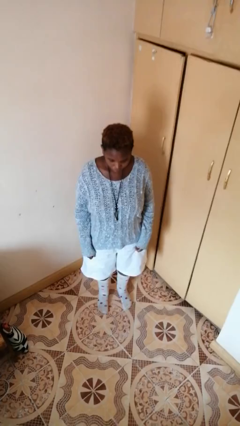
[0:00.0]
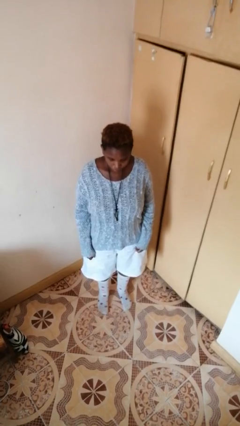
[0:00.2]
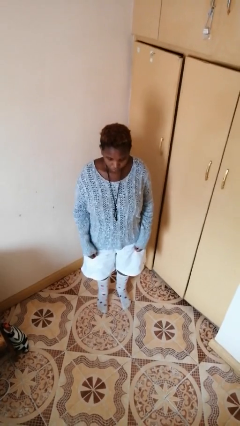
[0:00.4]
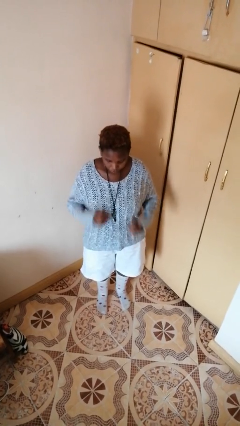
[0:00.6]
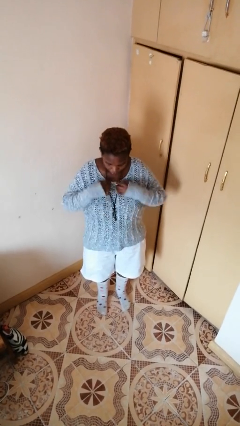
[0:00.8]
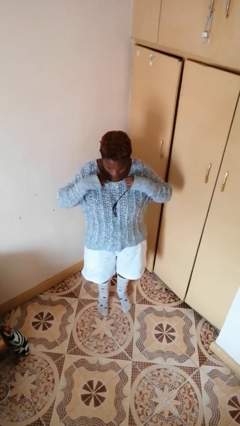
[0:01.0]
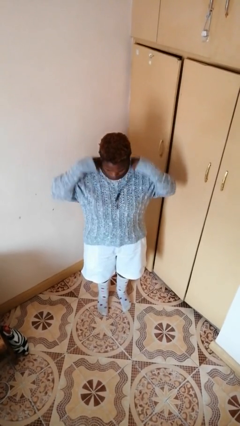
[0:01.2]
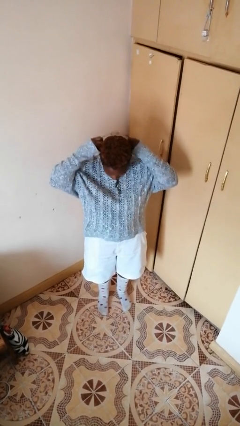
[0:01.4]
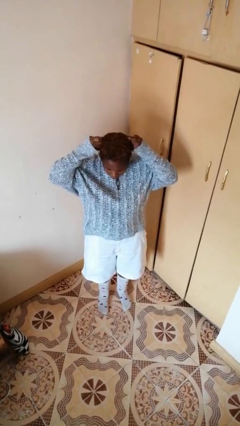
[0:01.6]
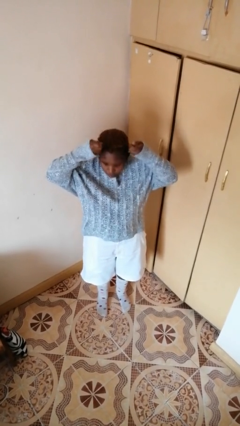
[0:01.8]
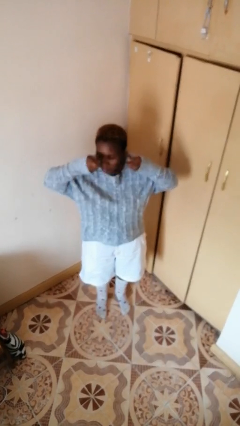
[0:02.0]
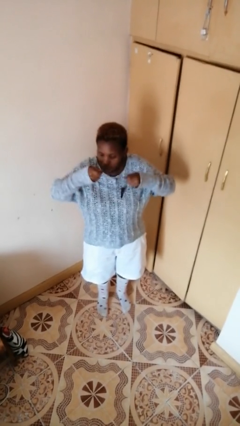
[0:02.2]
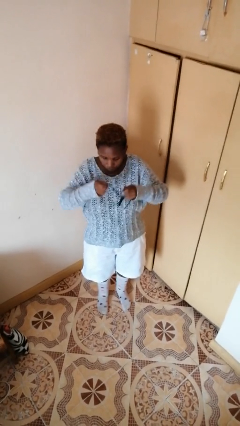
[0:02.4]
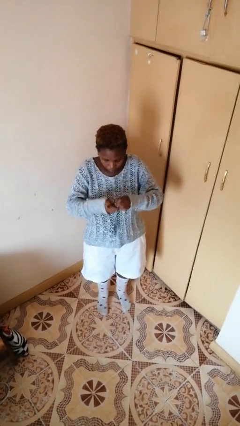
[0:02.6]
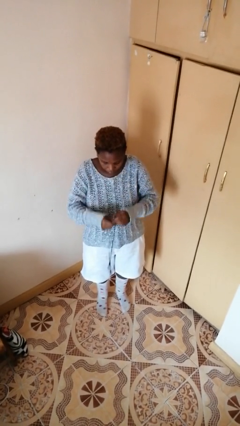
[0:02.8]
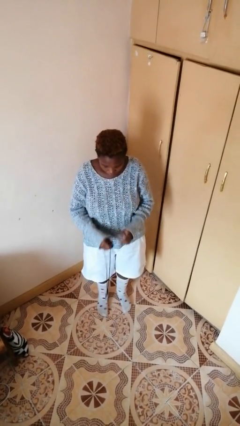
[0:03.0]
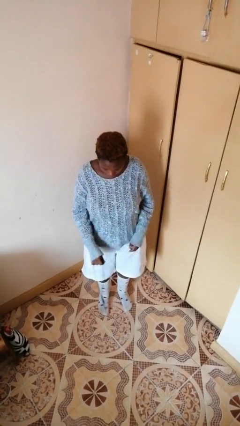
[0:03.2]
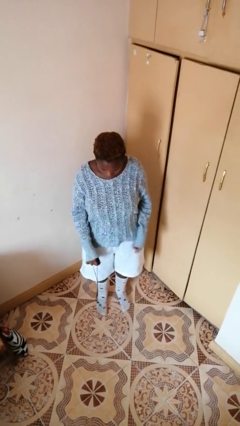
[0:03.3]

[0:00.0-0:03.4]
person takes off necklace

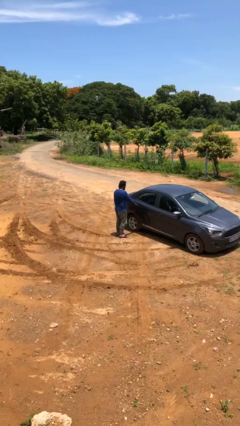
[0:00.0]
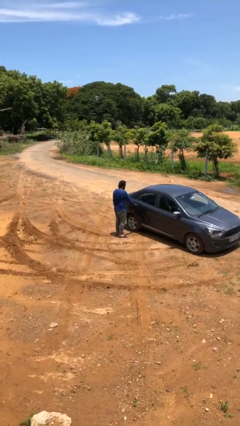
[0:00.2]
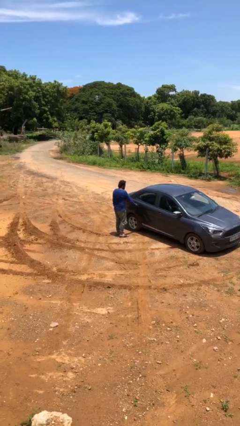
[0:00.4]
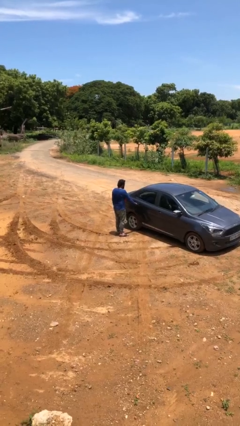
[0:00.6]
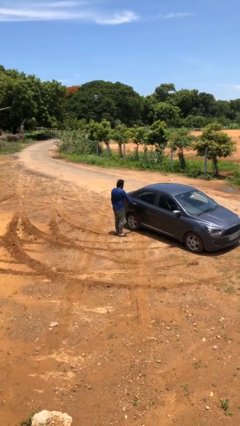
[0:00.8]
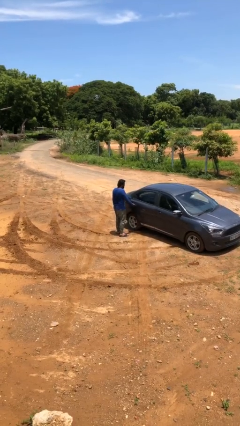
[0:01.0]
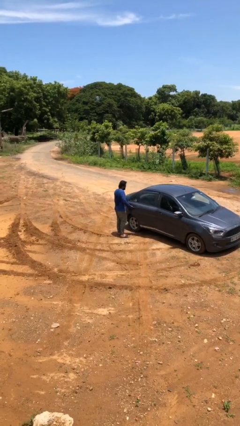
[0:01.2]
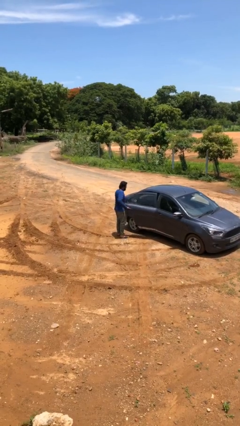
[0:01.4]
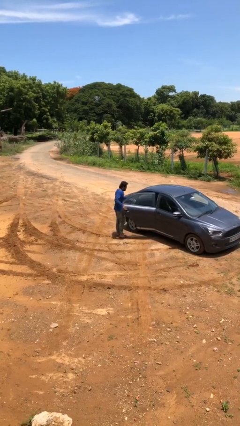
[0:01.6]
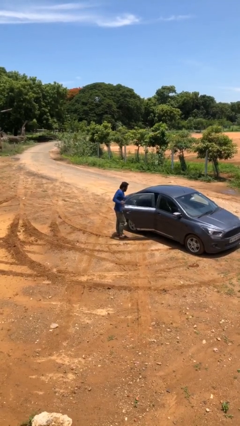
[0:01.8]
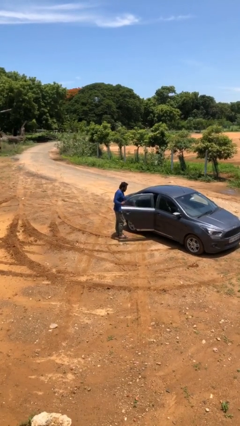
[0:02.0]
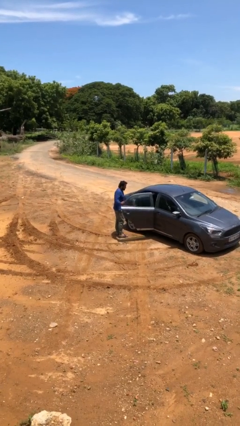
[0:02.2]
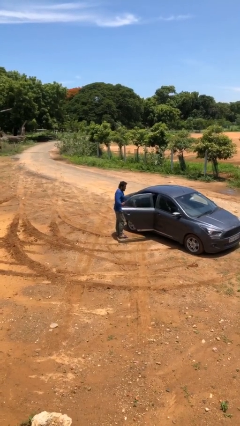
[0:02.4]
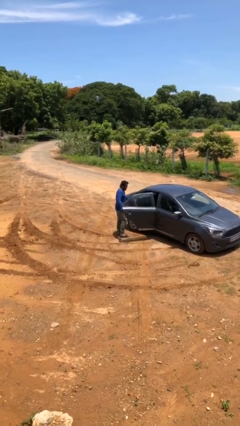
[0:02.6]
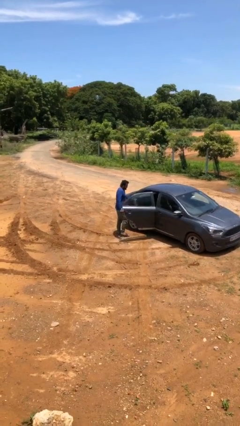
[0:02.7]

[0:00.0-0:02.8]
person opens car door

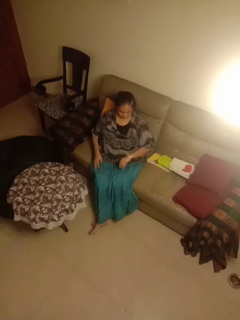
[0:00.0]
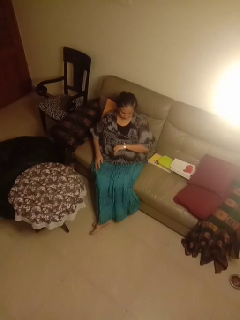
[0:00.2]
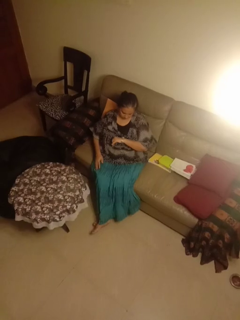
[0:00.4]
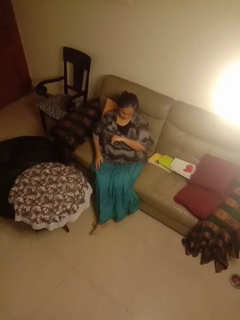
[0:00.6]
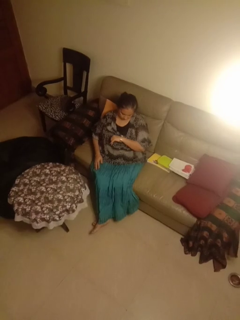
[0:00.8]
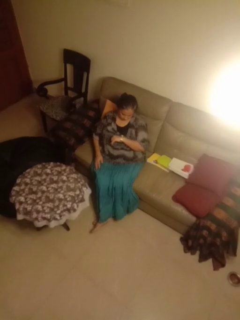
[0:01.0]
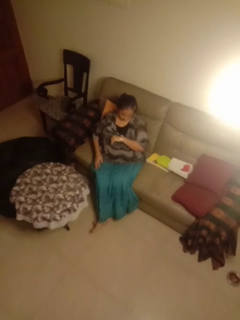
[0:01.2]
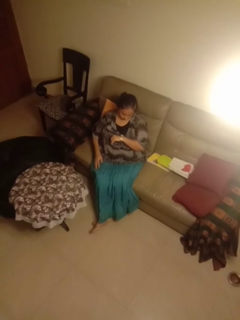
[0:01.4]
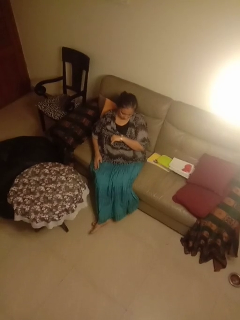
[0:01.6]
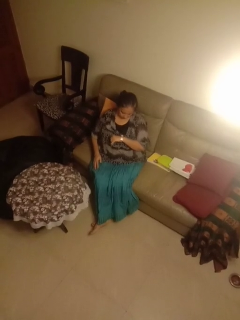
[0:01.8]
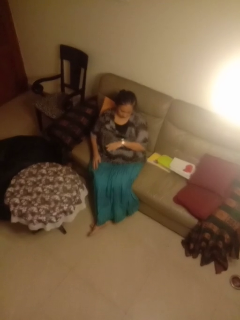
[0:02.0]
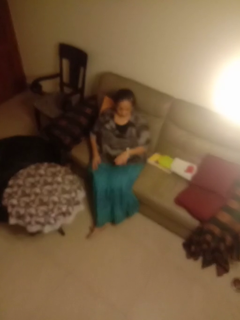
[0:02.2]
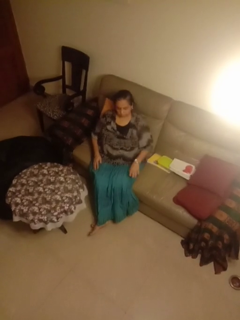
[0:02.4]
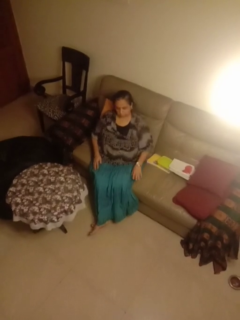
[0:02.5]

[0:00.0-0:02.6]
person looks at wristwatch

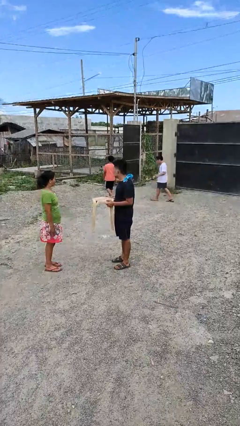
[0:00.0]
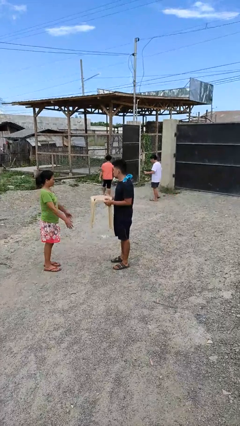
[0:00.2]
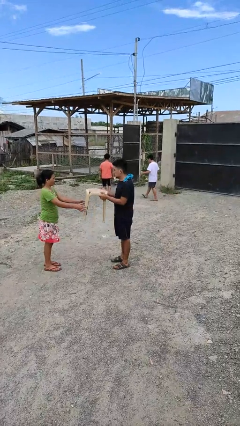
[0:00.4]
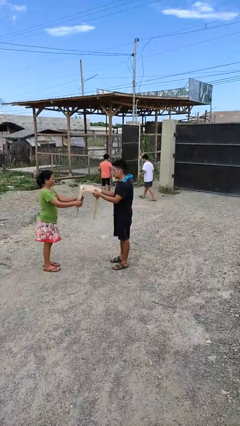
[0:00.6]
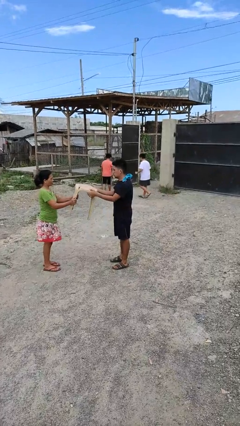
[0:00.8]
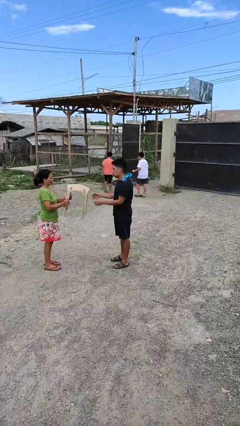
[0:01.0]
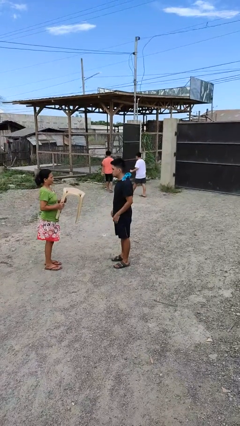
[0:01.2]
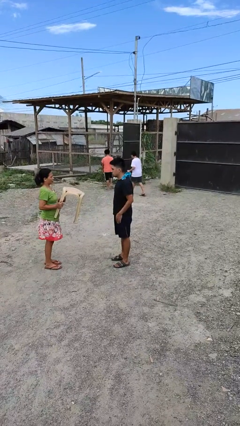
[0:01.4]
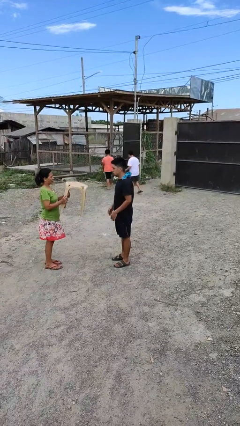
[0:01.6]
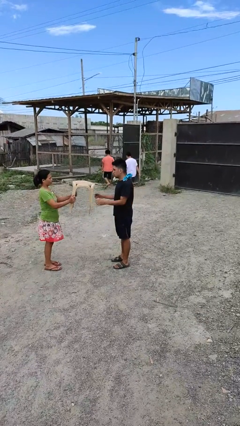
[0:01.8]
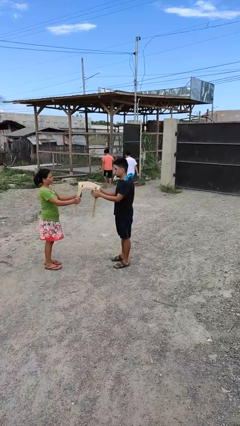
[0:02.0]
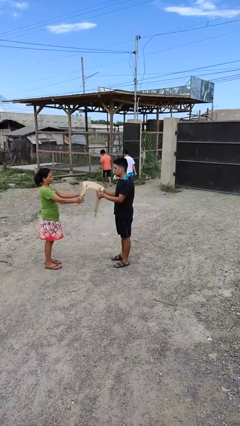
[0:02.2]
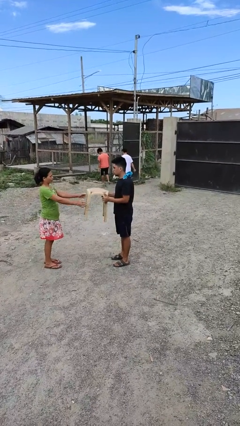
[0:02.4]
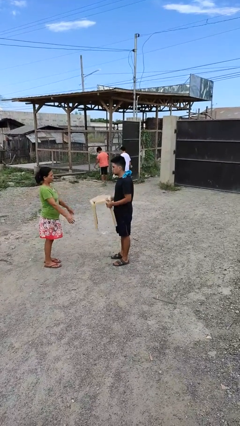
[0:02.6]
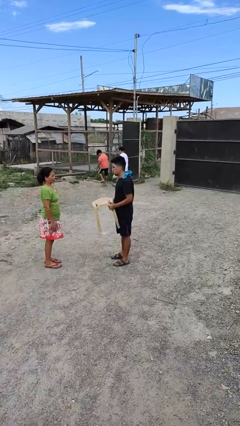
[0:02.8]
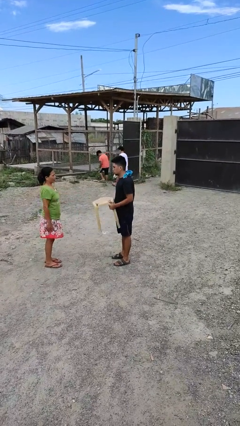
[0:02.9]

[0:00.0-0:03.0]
person transfers object to person

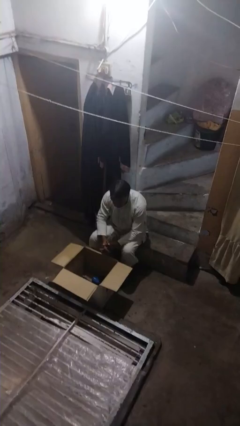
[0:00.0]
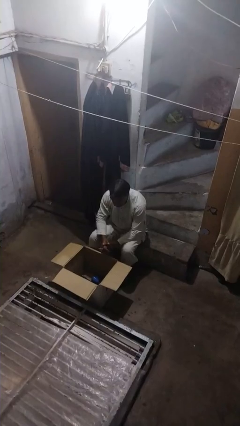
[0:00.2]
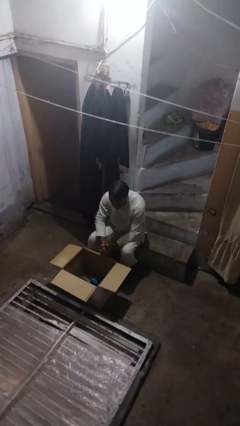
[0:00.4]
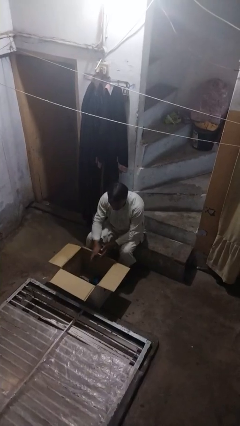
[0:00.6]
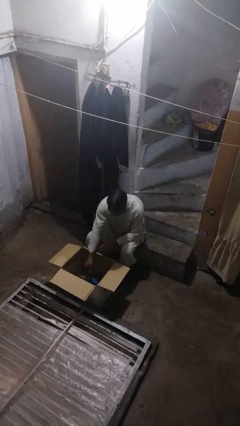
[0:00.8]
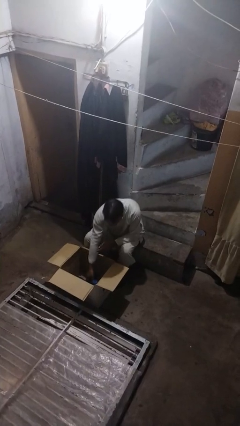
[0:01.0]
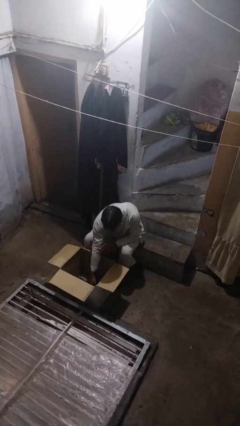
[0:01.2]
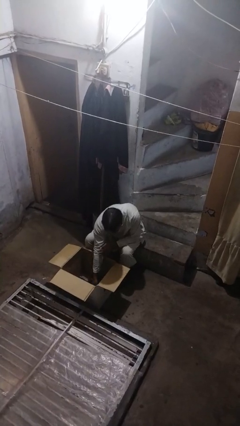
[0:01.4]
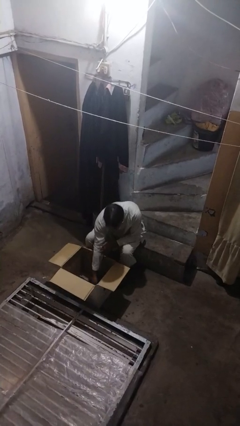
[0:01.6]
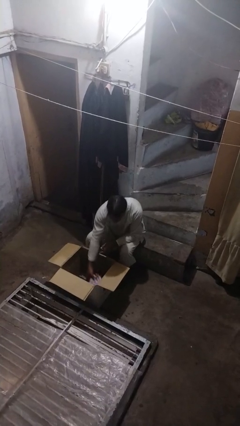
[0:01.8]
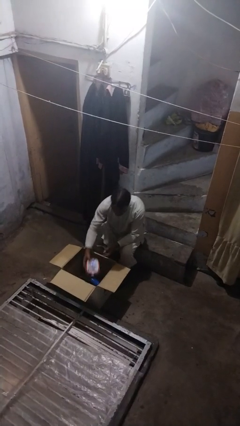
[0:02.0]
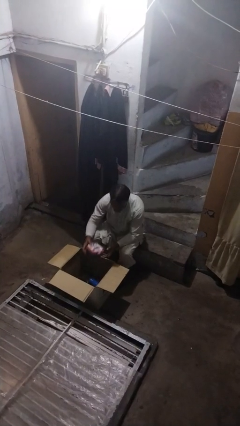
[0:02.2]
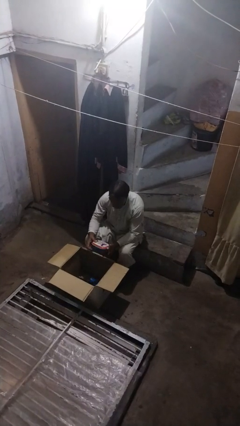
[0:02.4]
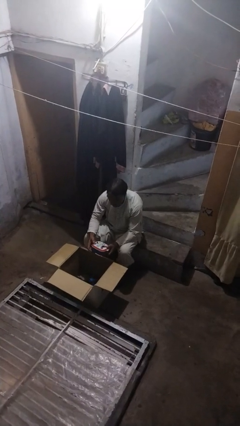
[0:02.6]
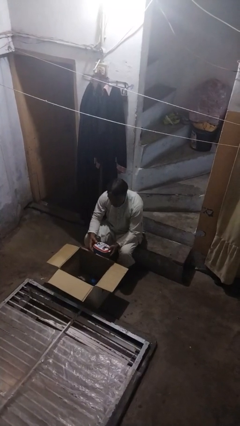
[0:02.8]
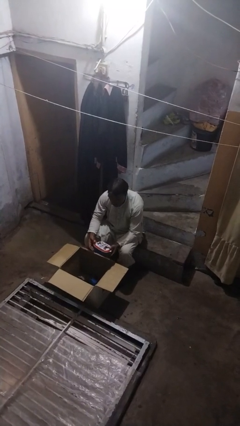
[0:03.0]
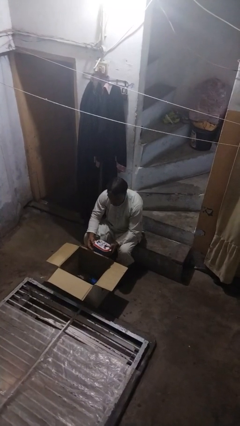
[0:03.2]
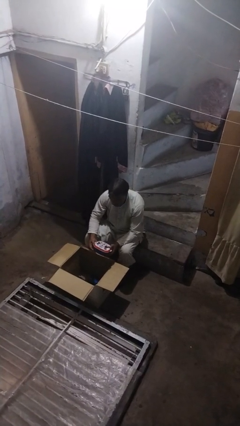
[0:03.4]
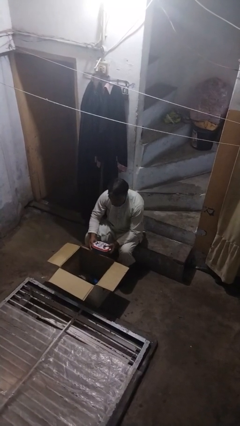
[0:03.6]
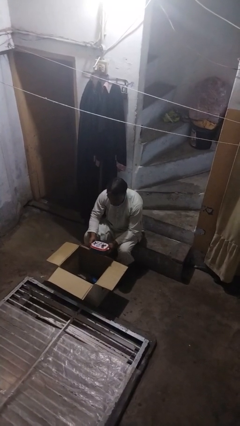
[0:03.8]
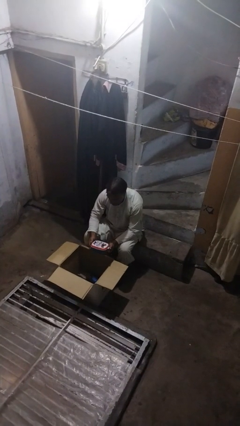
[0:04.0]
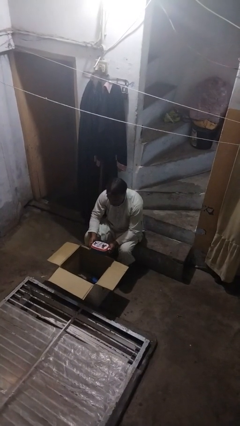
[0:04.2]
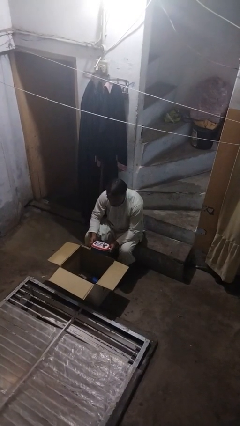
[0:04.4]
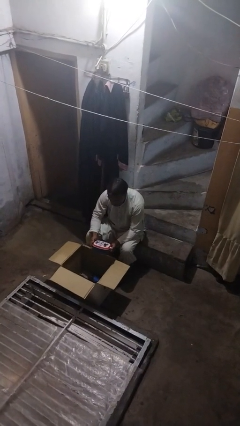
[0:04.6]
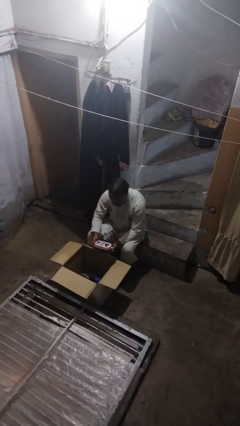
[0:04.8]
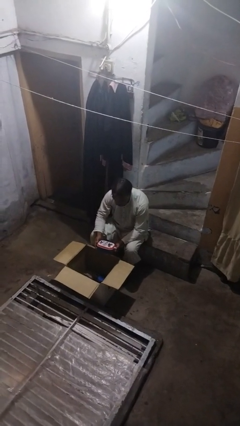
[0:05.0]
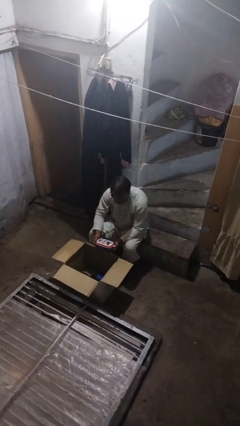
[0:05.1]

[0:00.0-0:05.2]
person takes object from box

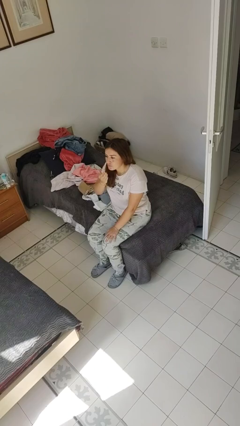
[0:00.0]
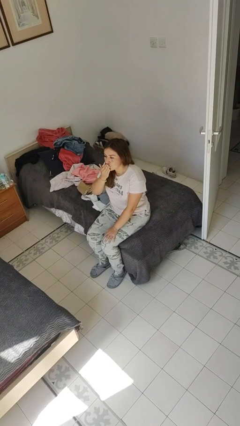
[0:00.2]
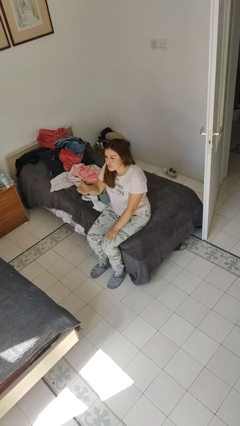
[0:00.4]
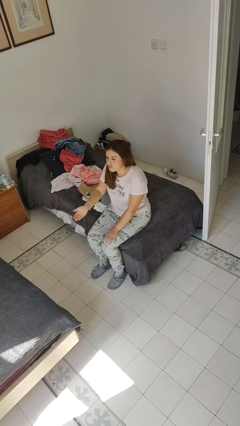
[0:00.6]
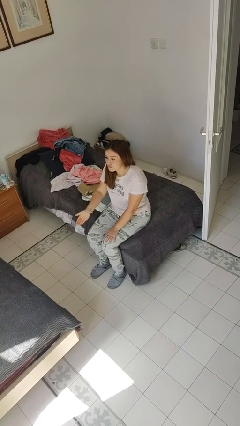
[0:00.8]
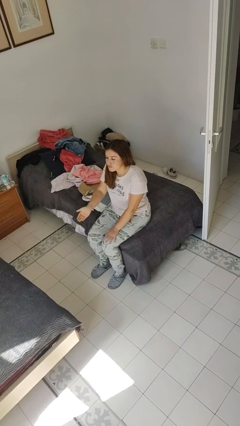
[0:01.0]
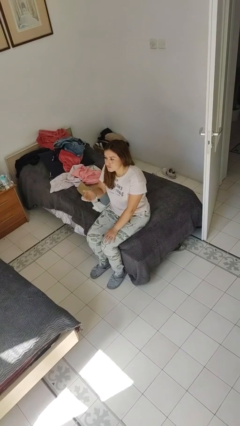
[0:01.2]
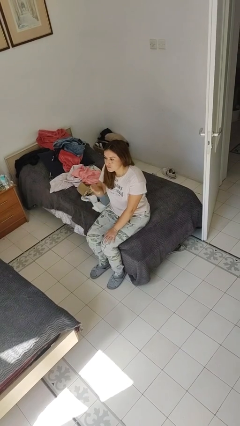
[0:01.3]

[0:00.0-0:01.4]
person gestures blow kiss
